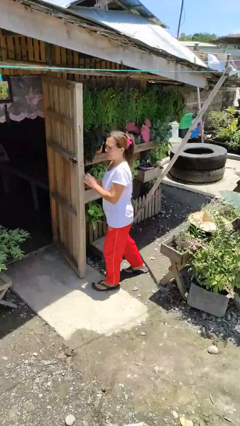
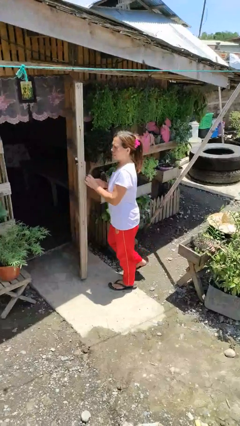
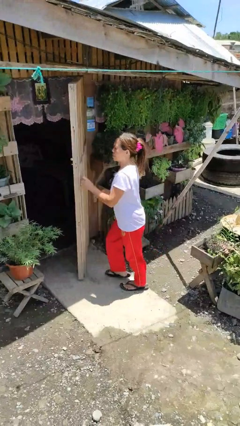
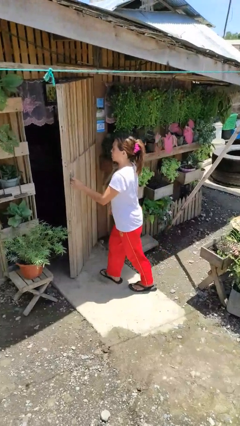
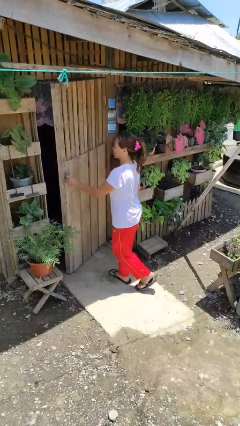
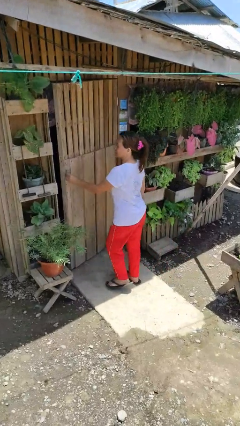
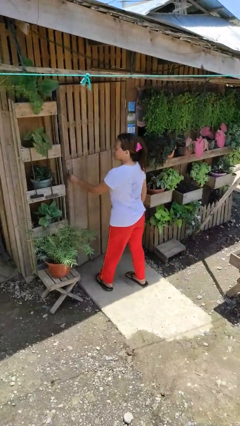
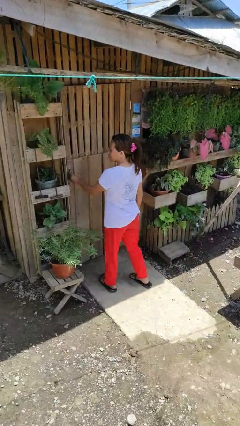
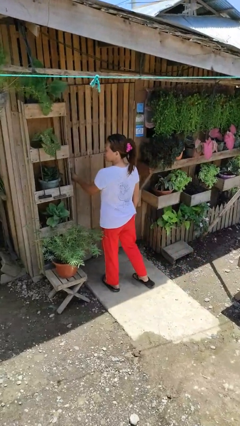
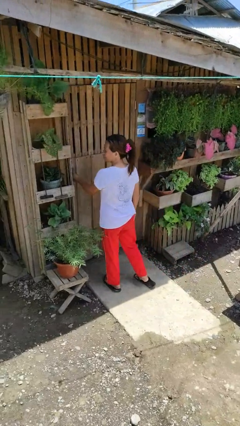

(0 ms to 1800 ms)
person closes facility door

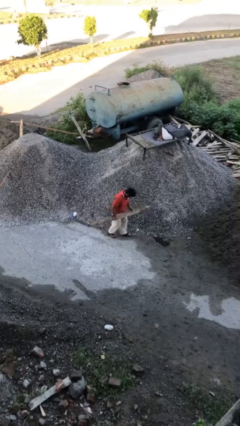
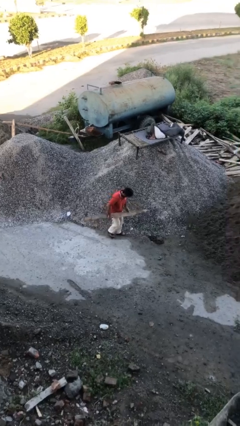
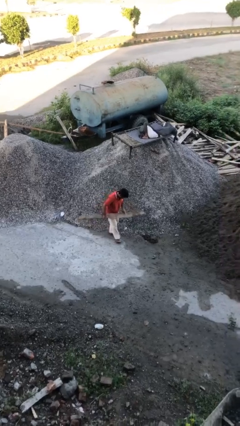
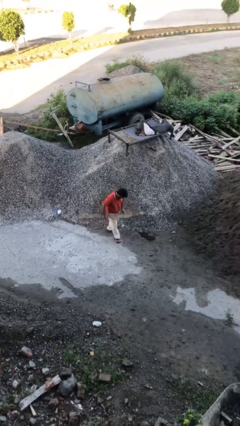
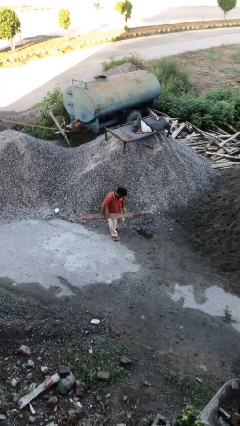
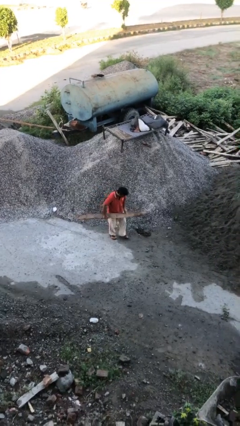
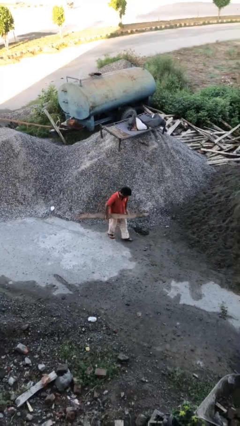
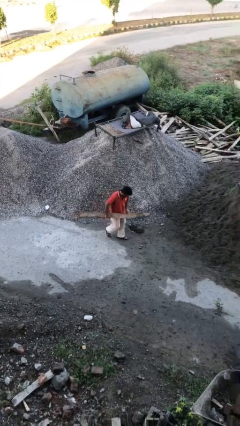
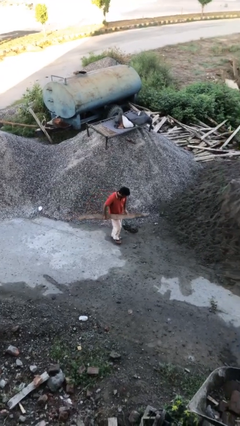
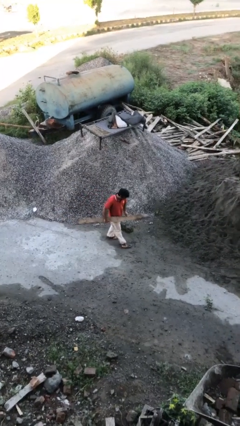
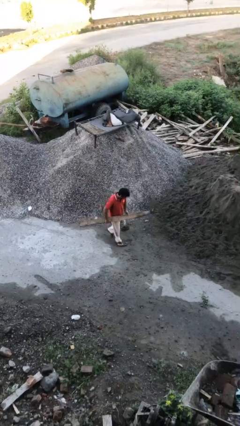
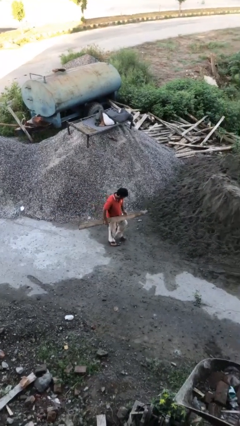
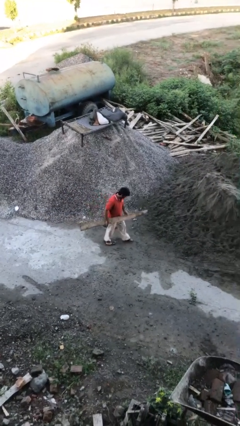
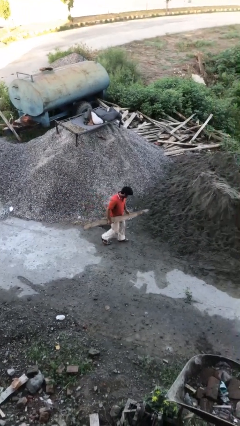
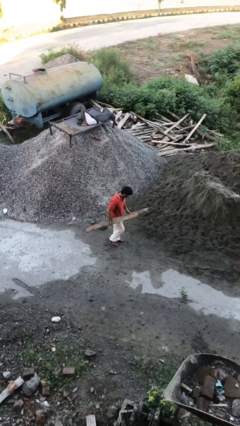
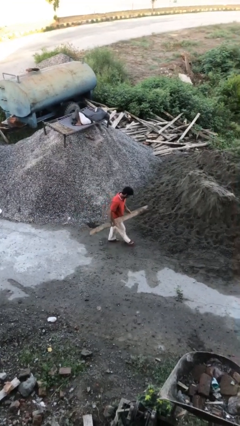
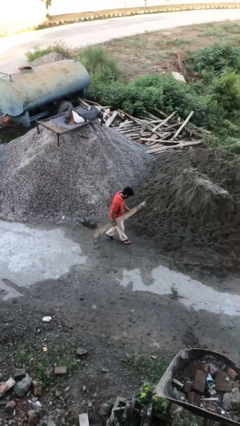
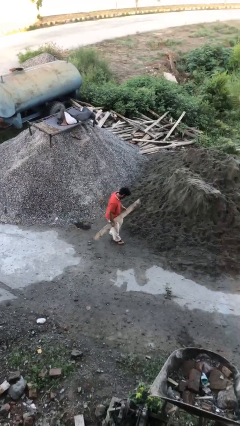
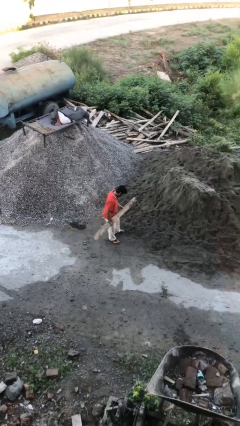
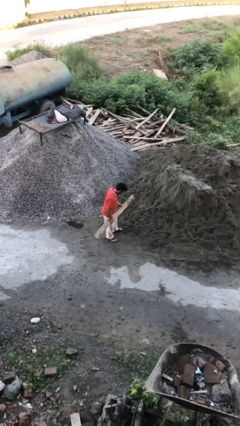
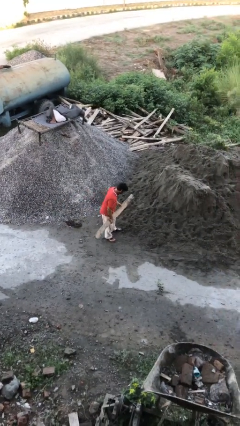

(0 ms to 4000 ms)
person carries heavy object

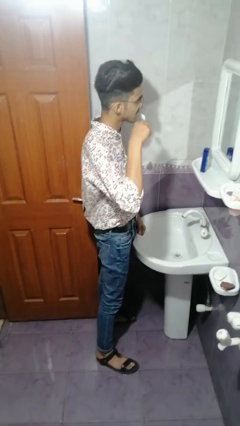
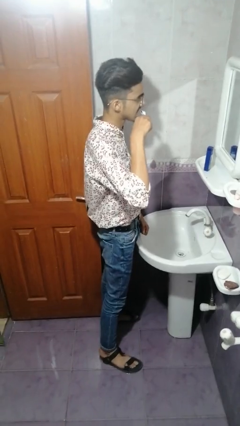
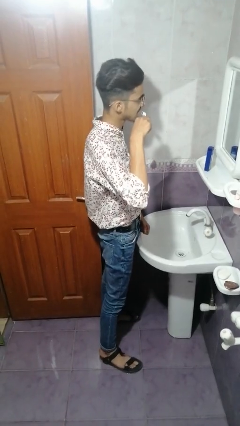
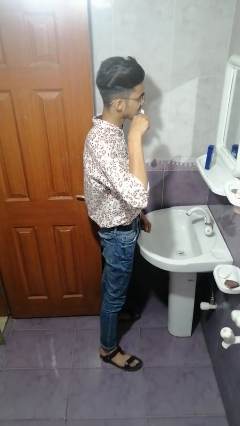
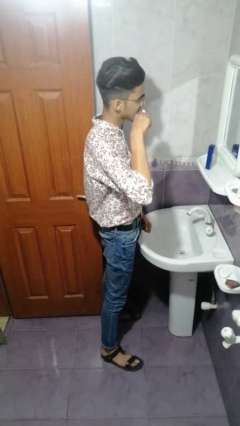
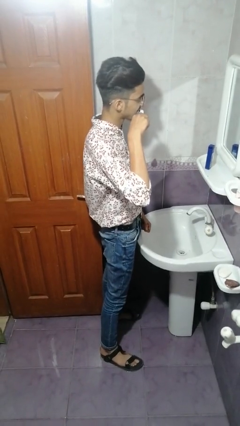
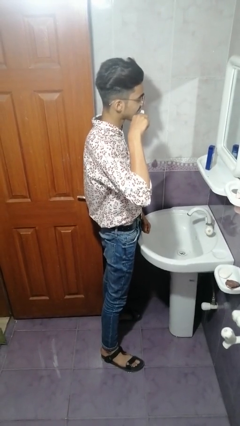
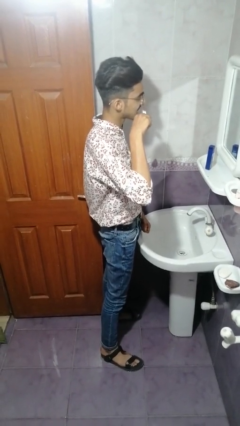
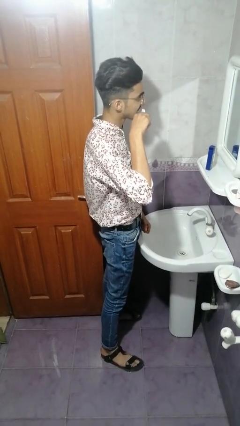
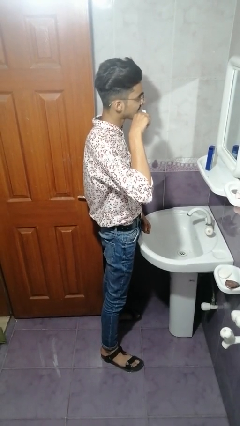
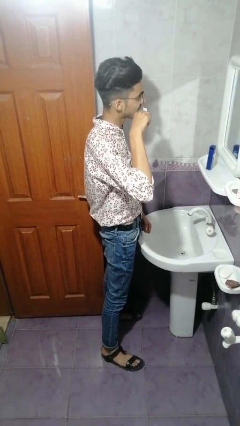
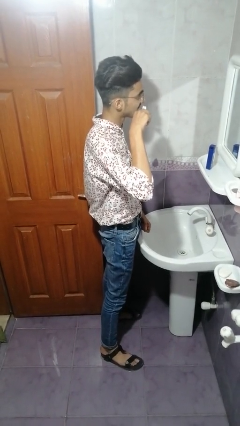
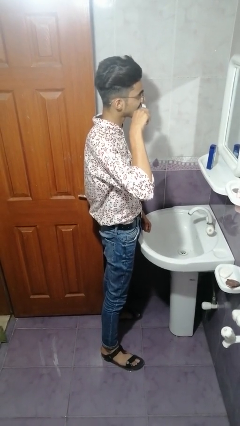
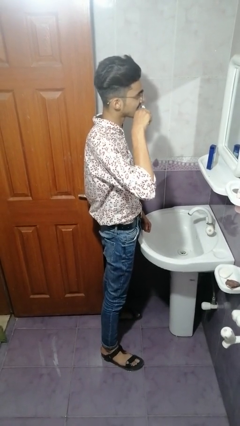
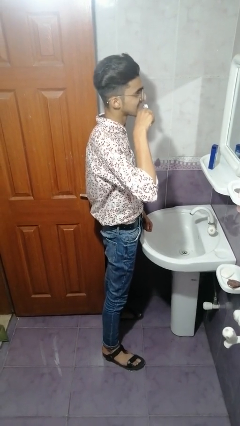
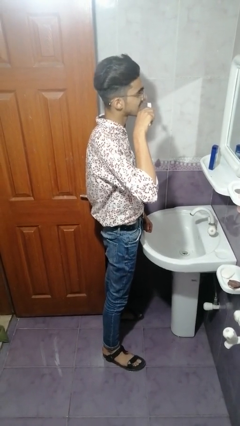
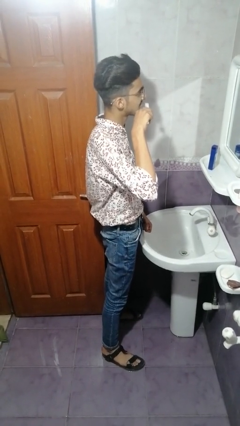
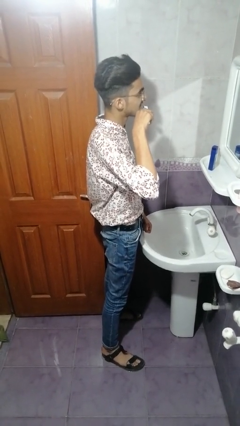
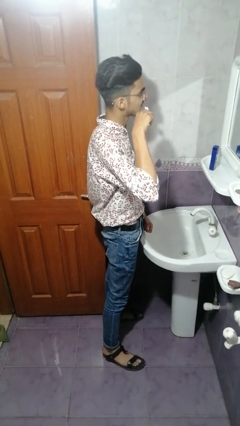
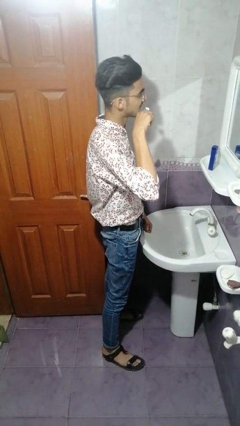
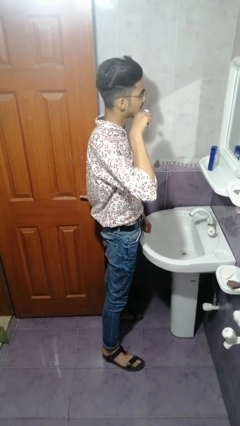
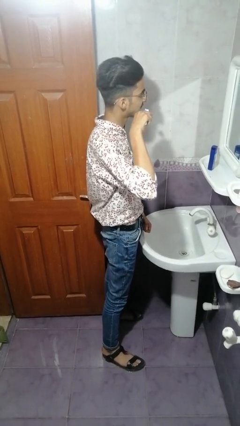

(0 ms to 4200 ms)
person brushes teeth

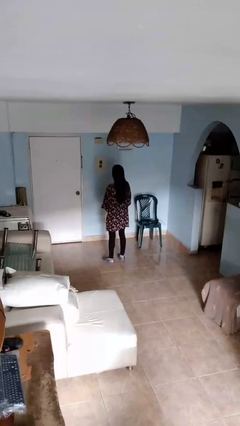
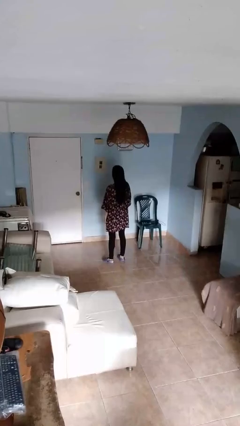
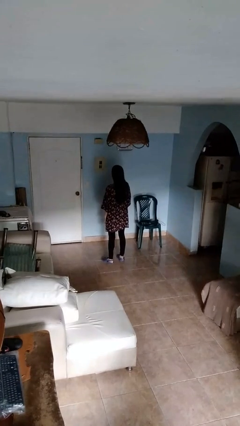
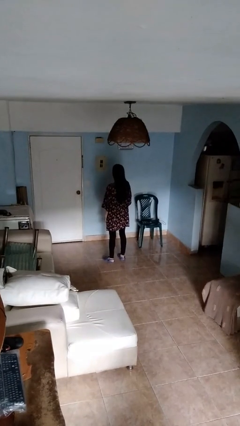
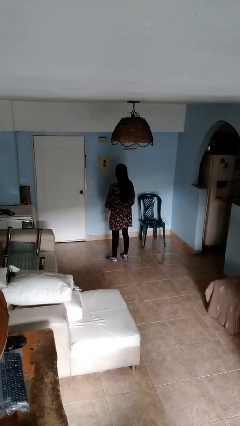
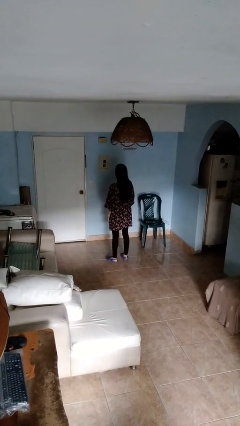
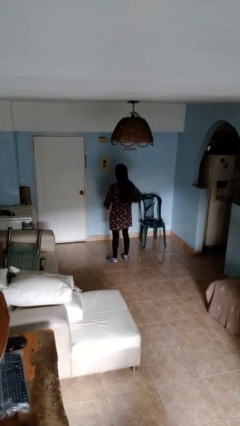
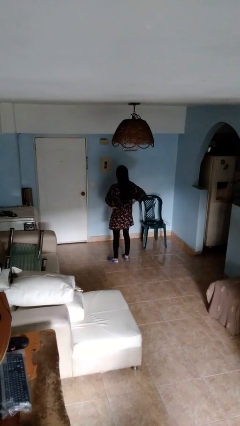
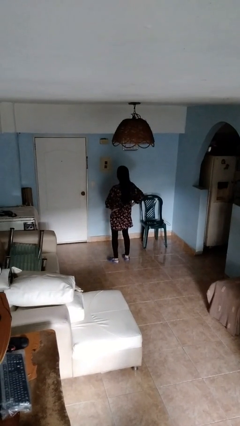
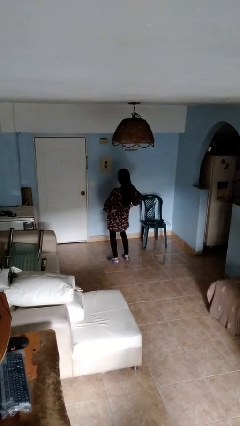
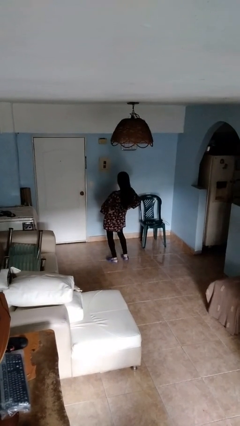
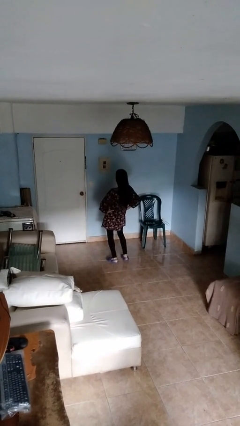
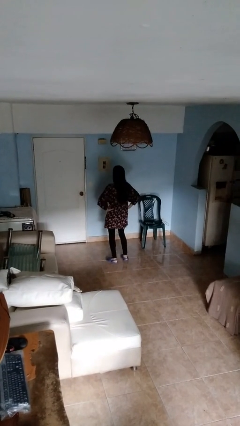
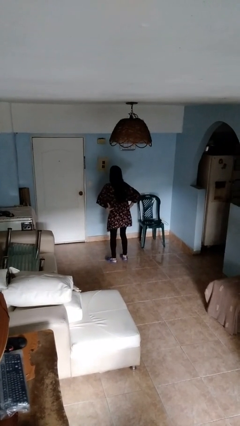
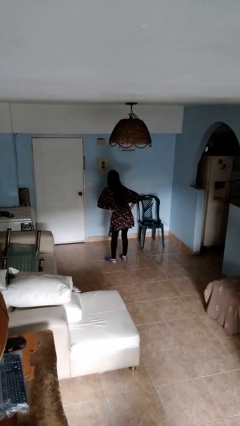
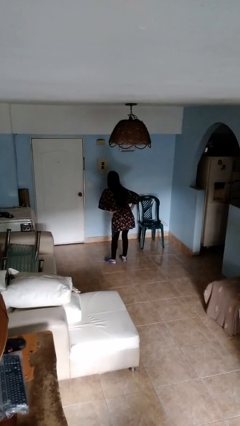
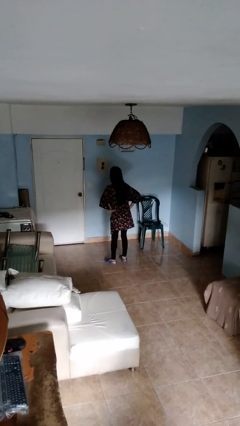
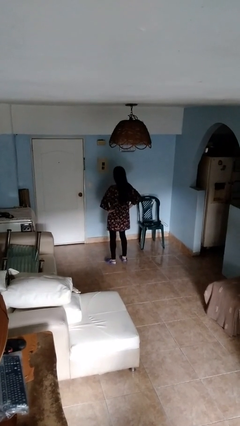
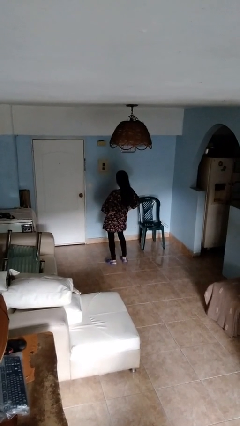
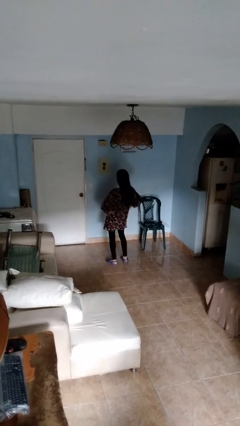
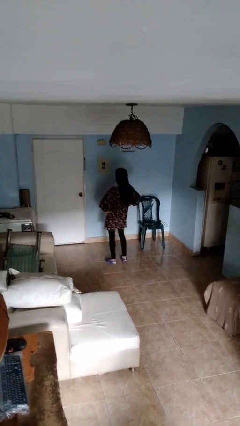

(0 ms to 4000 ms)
person wiggles hips

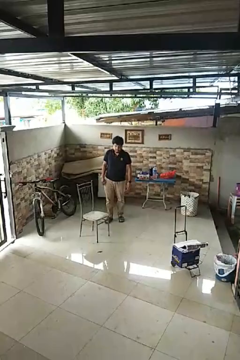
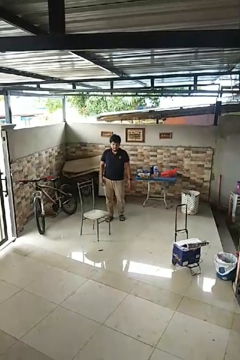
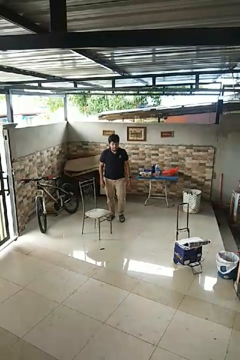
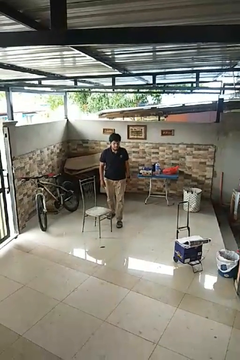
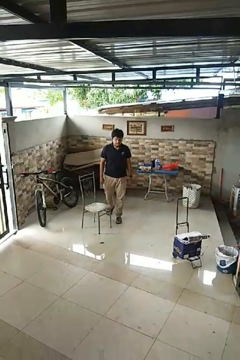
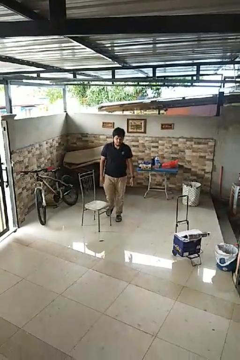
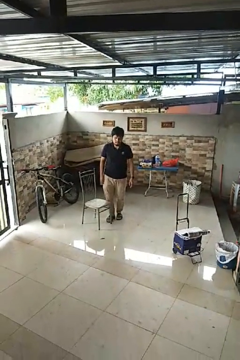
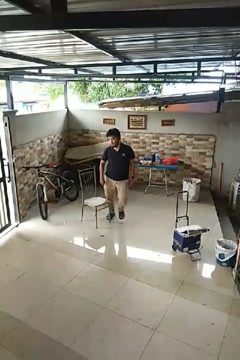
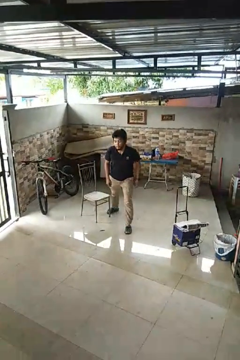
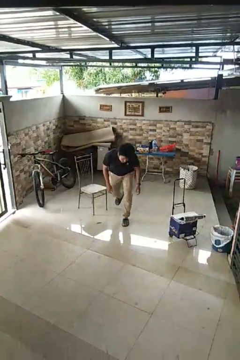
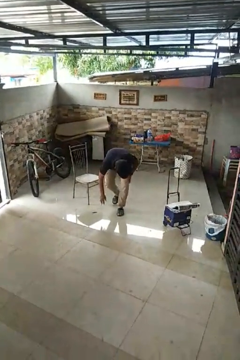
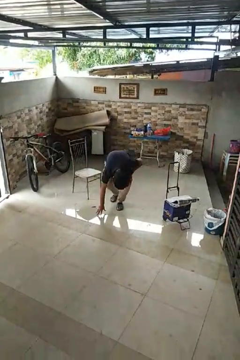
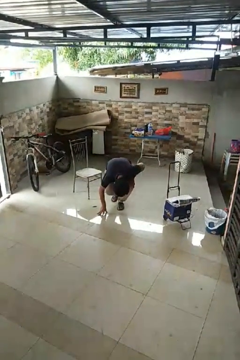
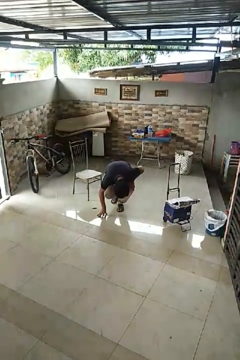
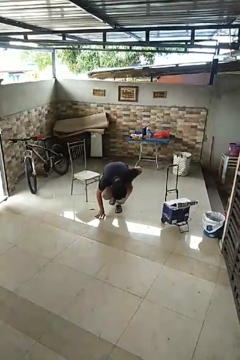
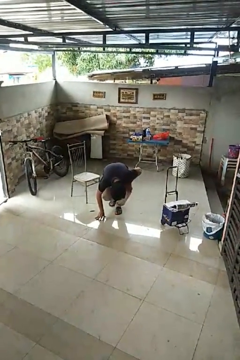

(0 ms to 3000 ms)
person trips on object on floor

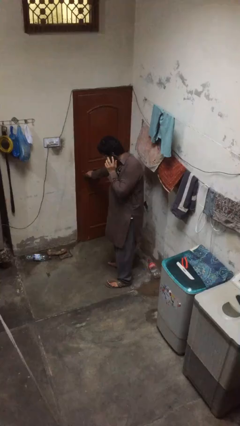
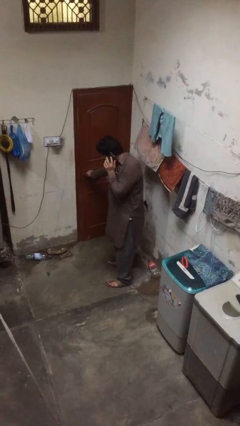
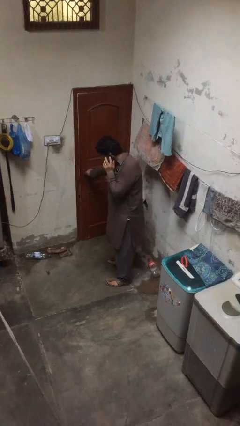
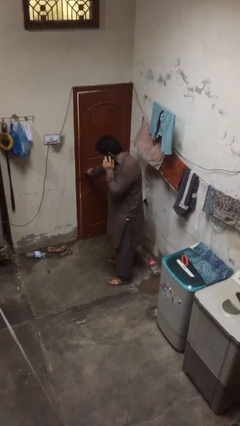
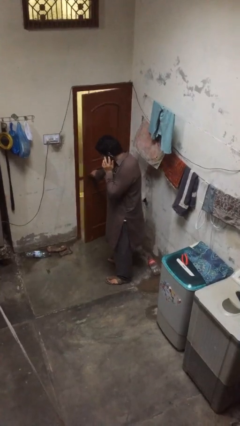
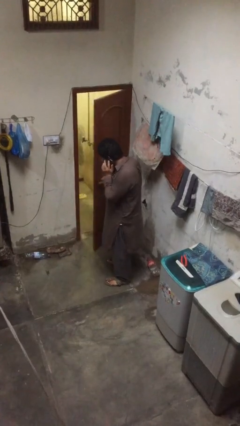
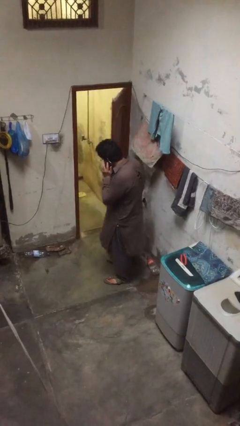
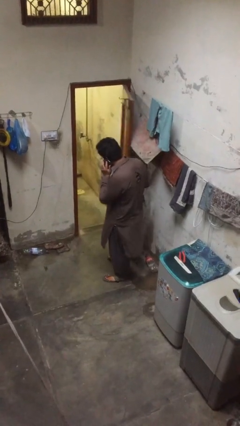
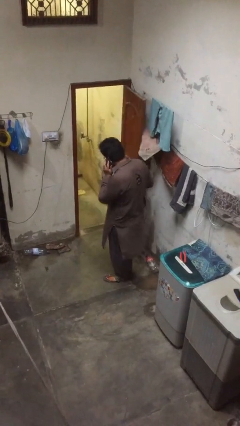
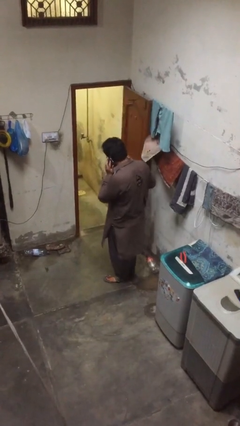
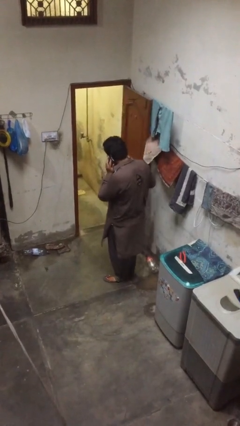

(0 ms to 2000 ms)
person opens facility door
